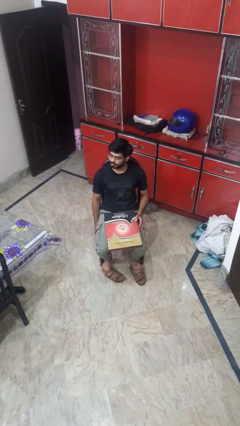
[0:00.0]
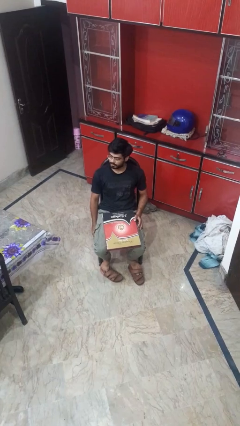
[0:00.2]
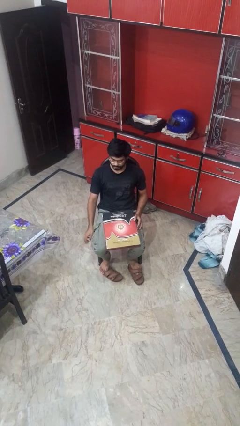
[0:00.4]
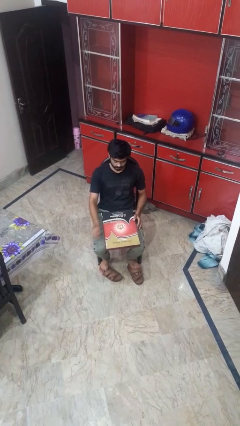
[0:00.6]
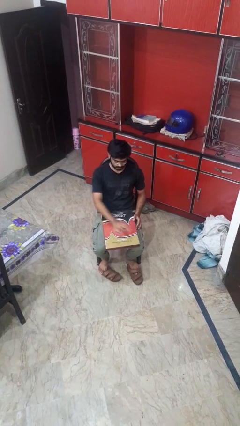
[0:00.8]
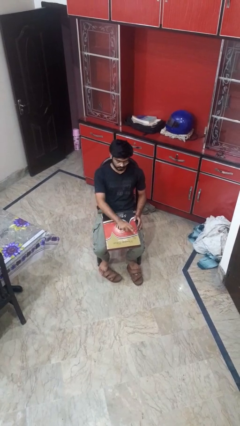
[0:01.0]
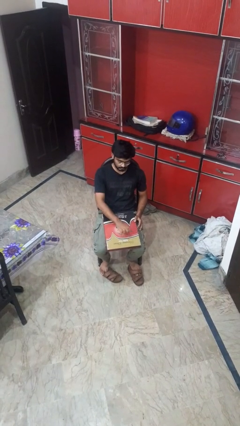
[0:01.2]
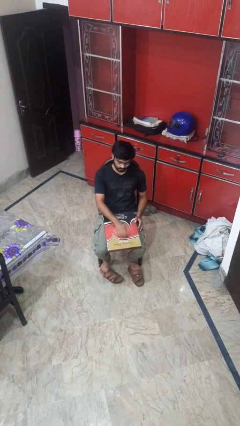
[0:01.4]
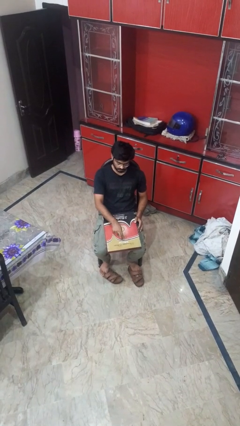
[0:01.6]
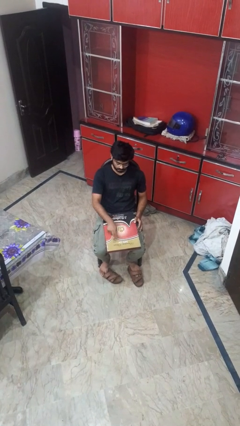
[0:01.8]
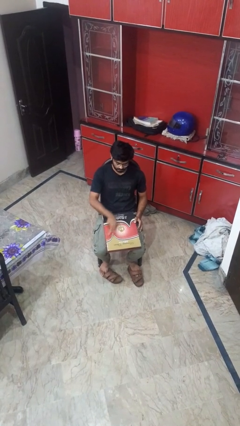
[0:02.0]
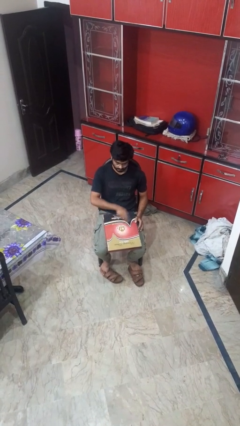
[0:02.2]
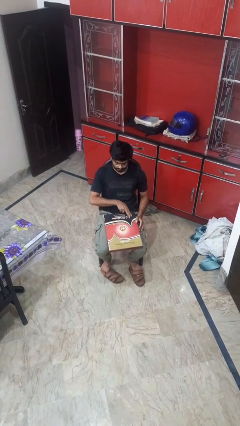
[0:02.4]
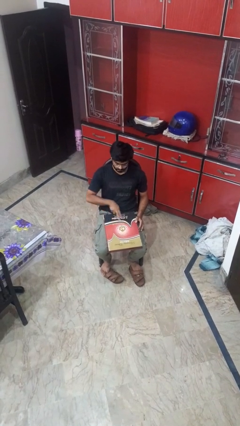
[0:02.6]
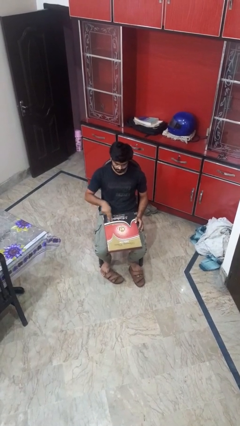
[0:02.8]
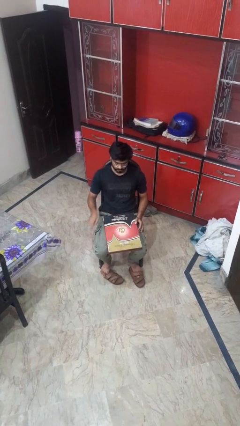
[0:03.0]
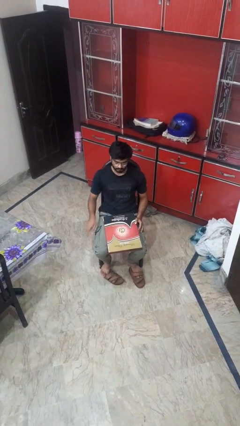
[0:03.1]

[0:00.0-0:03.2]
person taps object with finger

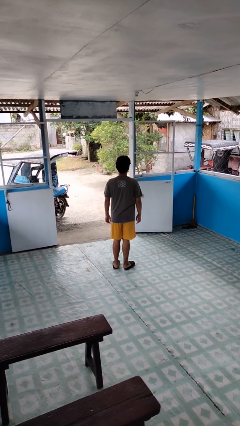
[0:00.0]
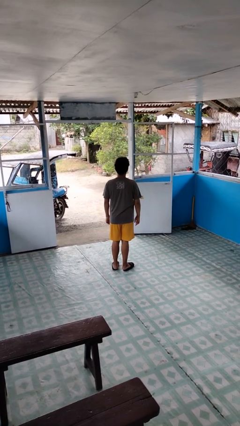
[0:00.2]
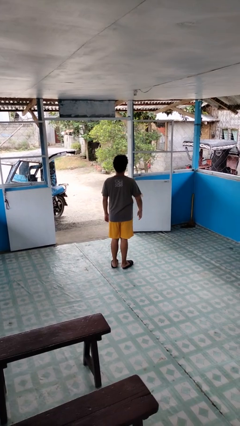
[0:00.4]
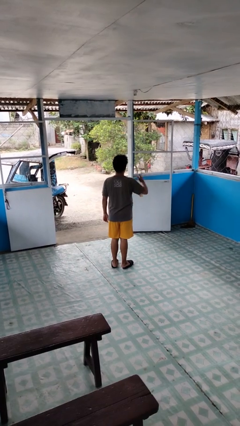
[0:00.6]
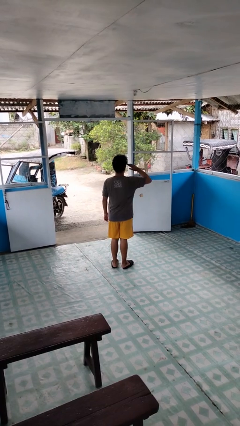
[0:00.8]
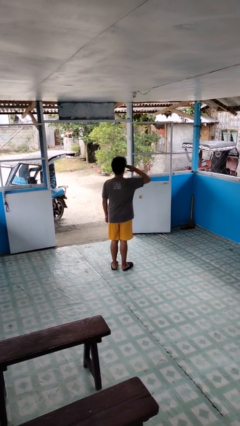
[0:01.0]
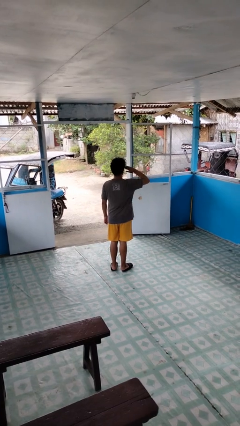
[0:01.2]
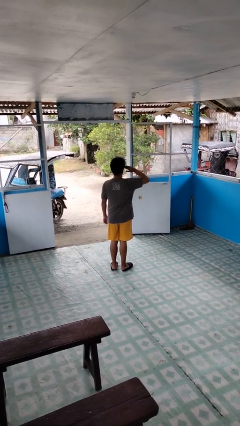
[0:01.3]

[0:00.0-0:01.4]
person salutes

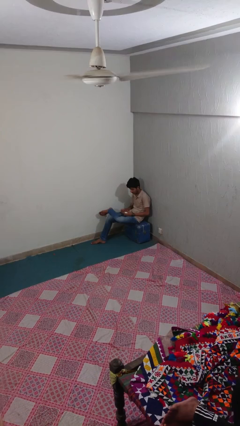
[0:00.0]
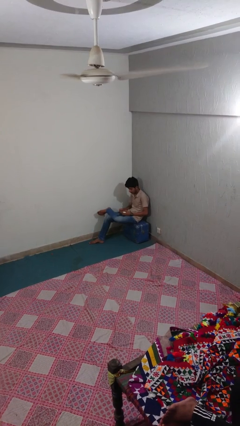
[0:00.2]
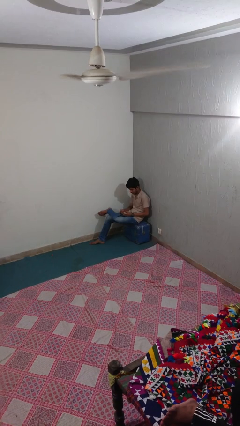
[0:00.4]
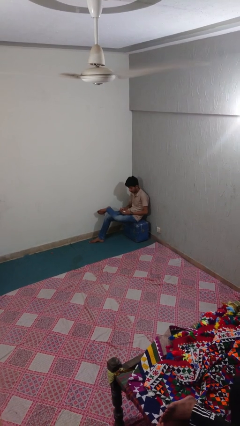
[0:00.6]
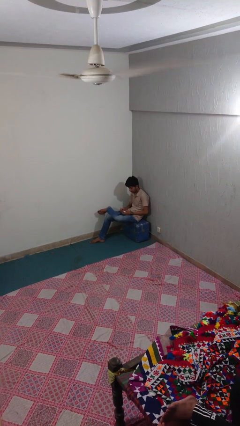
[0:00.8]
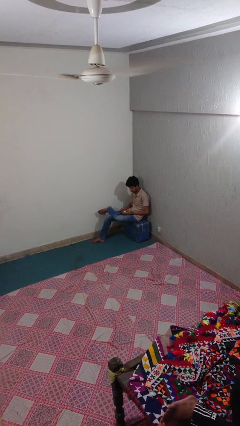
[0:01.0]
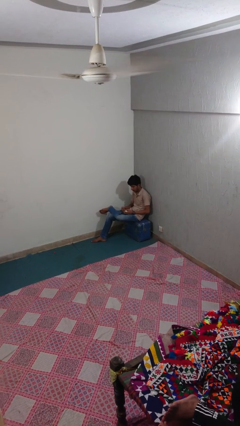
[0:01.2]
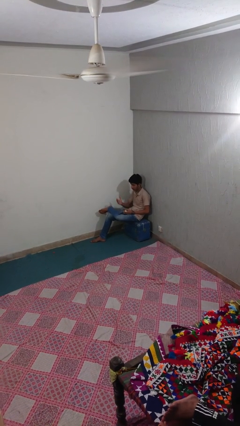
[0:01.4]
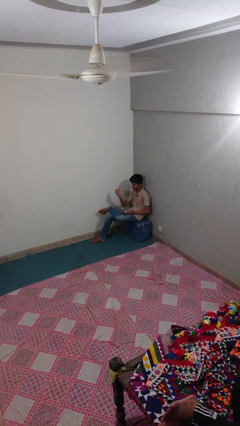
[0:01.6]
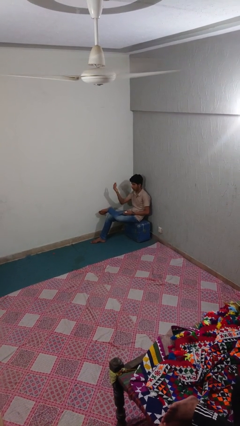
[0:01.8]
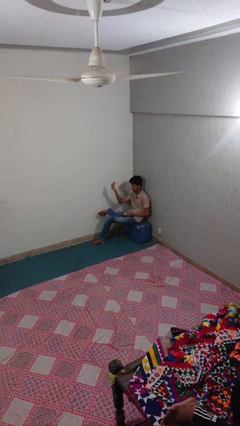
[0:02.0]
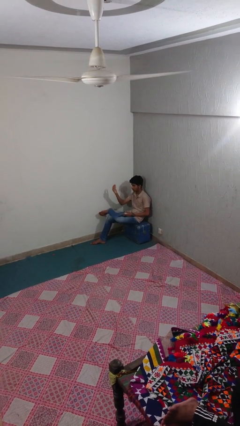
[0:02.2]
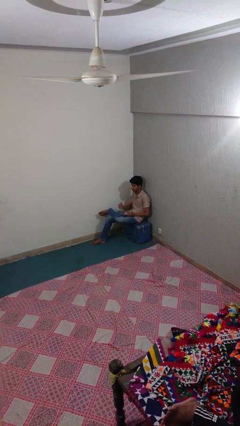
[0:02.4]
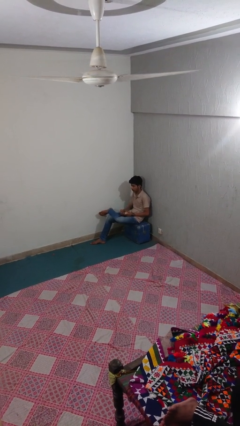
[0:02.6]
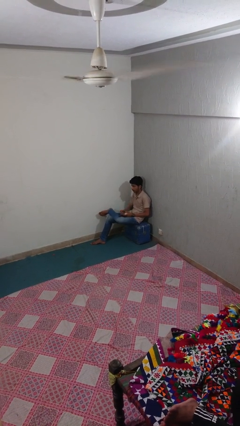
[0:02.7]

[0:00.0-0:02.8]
person gestures come here

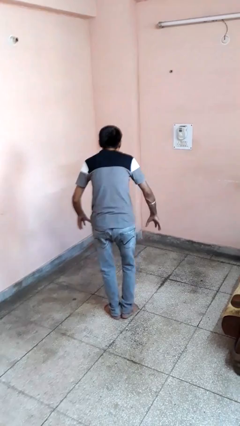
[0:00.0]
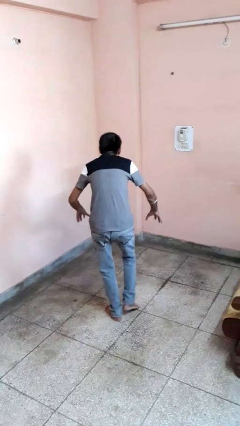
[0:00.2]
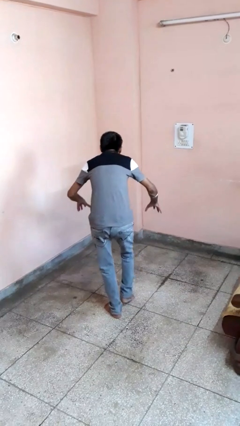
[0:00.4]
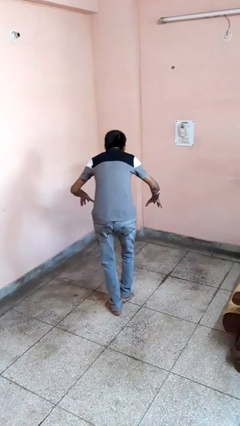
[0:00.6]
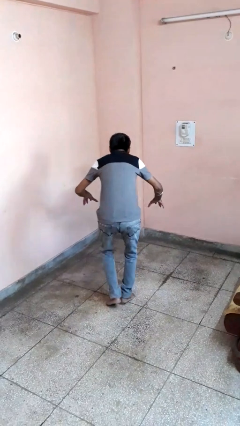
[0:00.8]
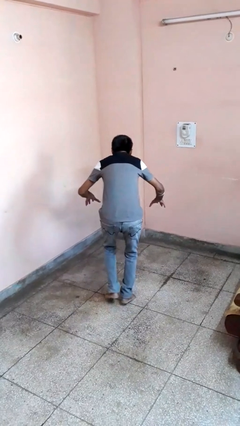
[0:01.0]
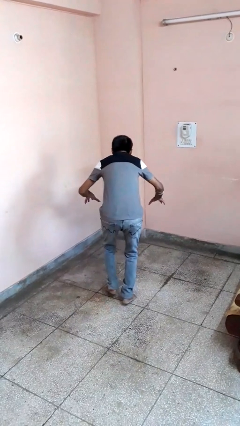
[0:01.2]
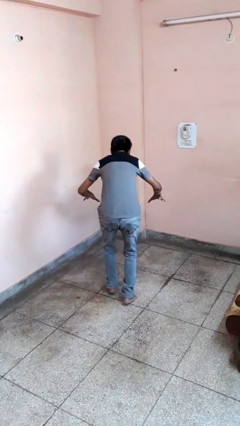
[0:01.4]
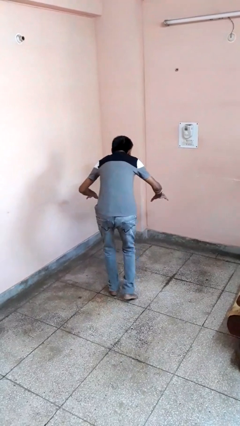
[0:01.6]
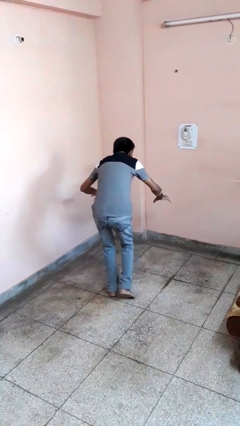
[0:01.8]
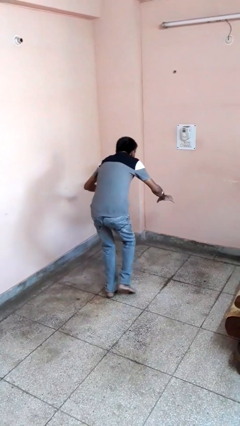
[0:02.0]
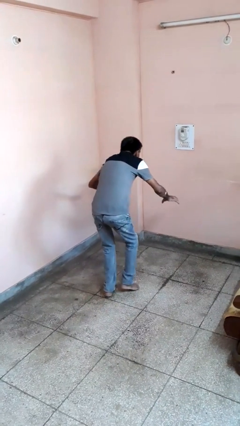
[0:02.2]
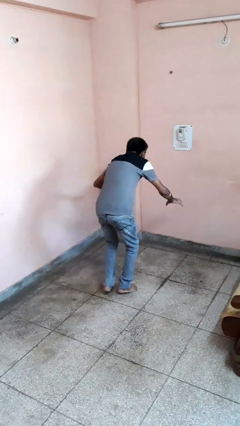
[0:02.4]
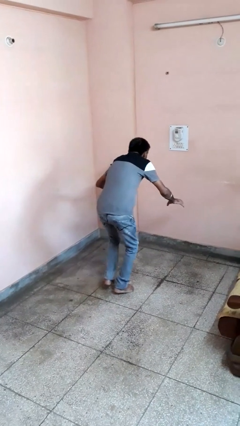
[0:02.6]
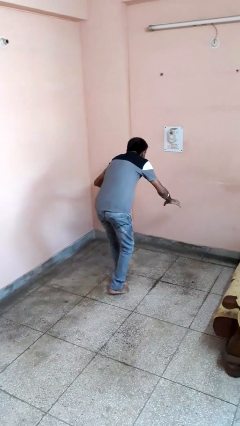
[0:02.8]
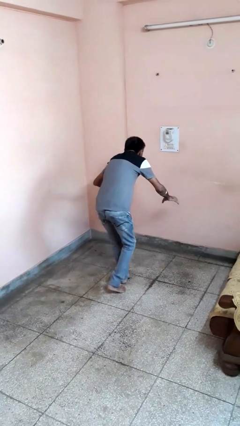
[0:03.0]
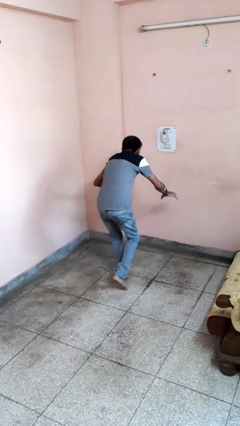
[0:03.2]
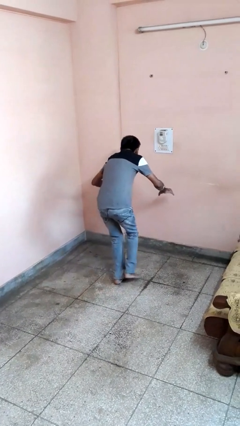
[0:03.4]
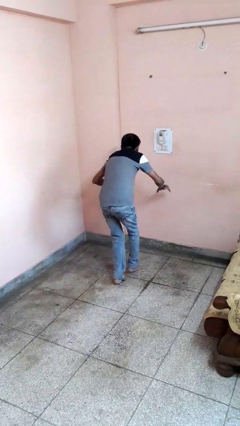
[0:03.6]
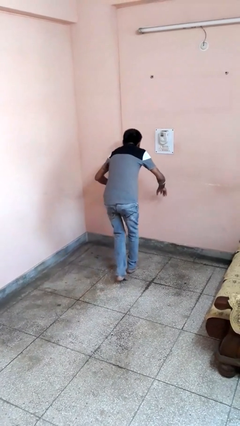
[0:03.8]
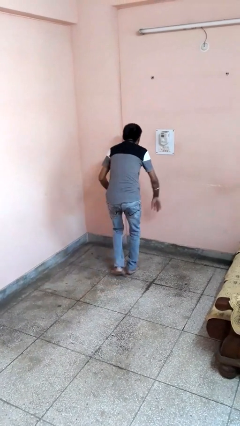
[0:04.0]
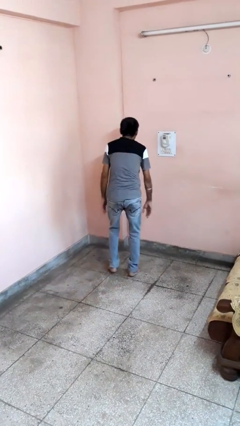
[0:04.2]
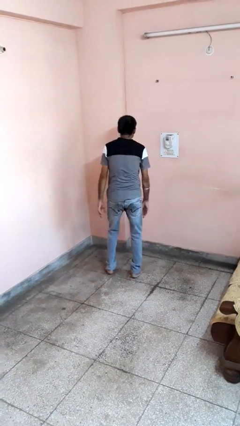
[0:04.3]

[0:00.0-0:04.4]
person walks tiptoe

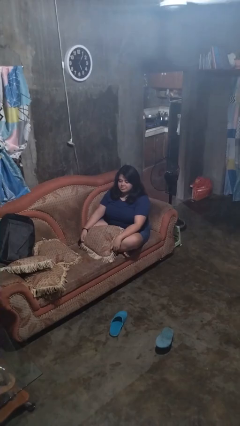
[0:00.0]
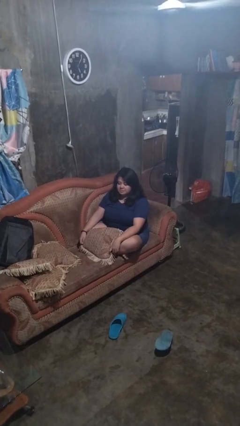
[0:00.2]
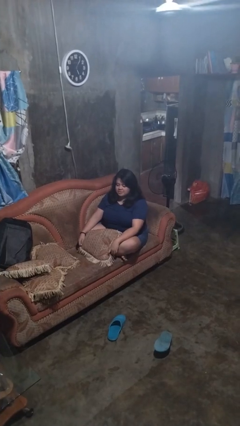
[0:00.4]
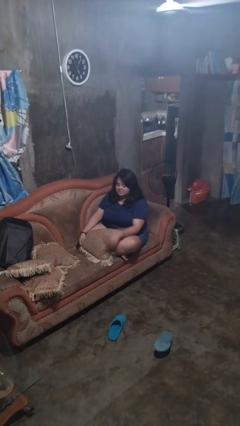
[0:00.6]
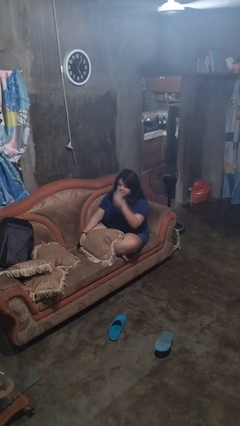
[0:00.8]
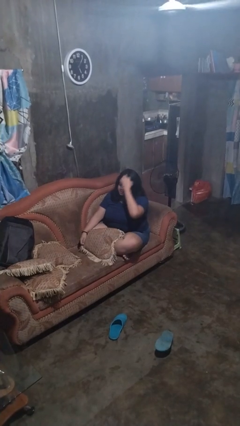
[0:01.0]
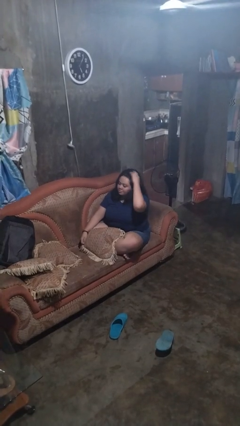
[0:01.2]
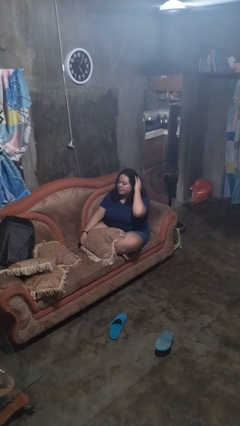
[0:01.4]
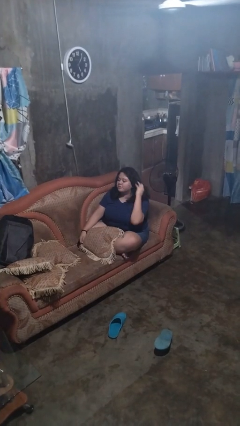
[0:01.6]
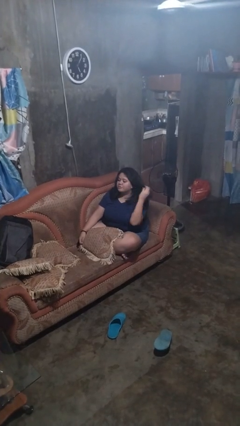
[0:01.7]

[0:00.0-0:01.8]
person strokes hair

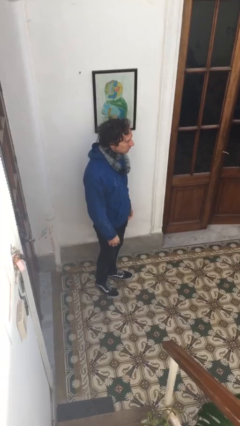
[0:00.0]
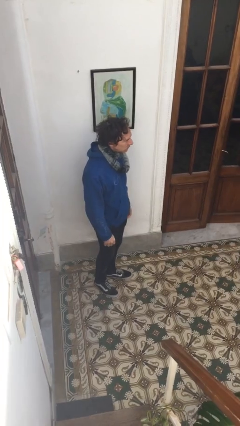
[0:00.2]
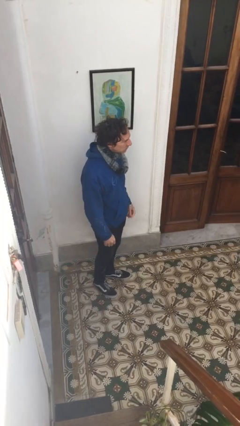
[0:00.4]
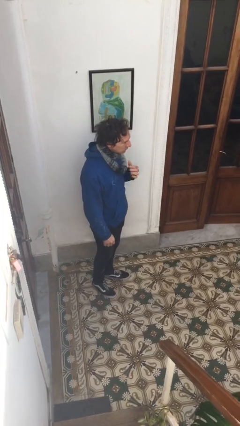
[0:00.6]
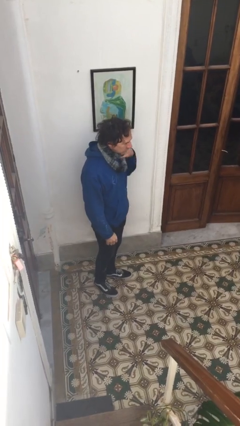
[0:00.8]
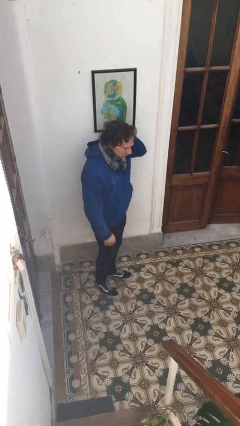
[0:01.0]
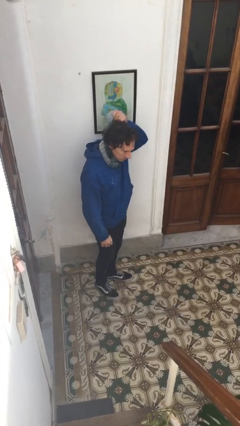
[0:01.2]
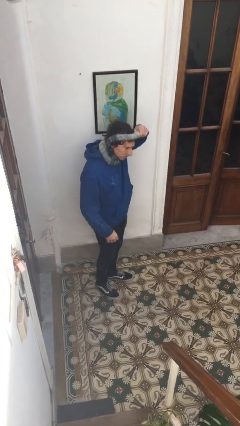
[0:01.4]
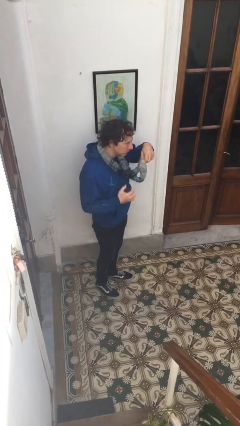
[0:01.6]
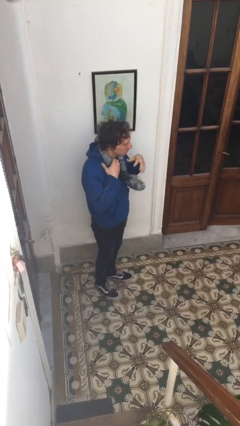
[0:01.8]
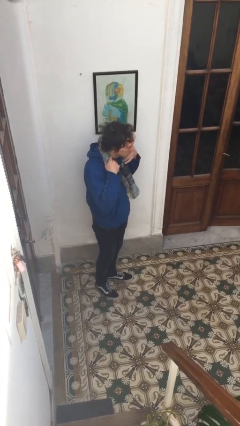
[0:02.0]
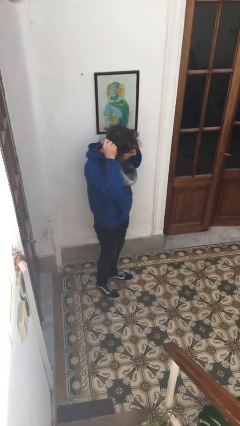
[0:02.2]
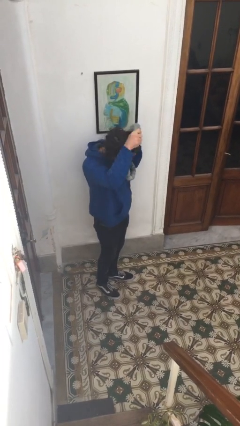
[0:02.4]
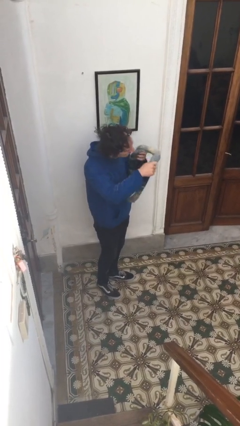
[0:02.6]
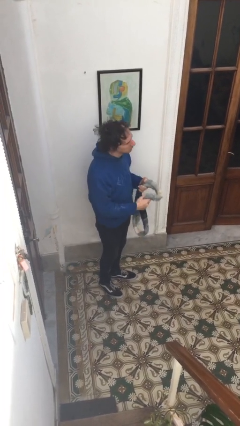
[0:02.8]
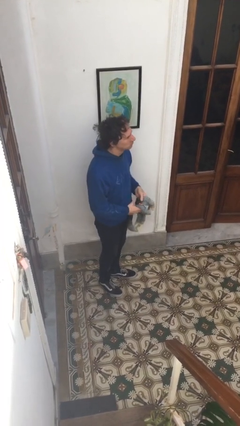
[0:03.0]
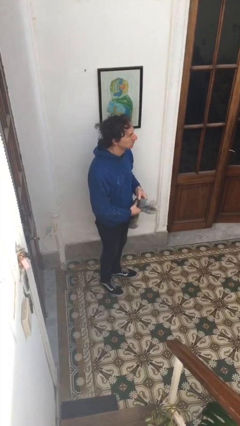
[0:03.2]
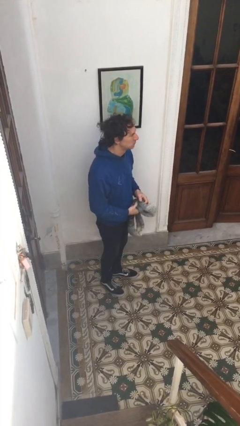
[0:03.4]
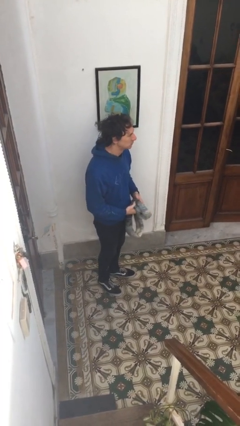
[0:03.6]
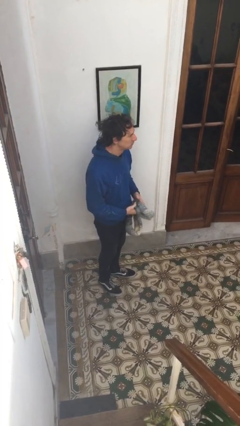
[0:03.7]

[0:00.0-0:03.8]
person takes off scarf

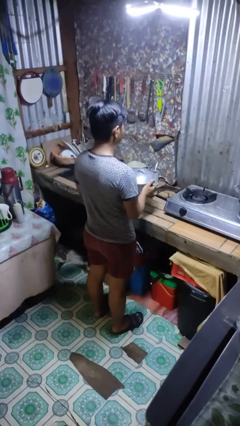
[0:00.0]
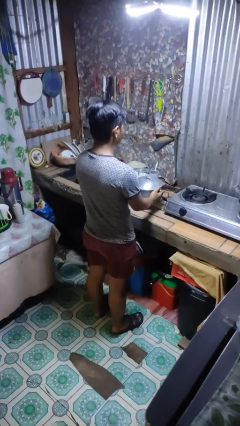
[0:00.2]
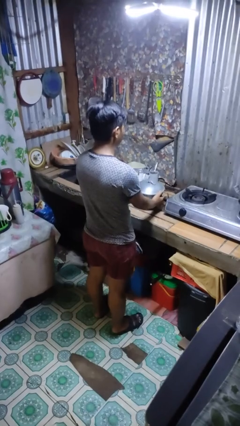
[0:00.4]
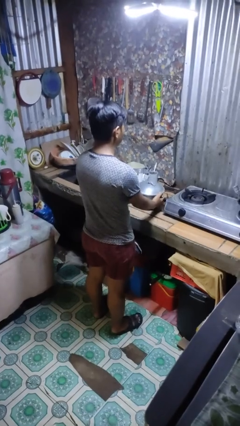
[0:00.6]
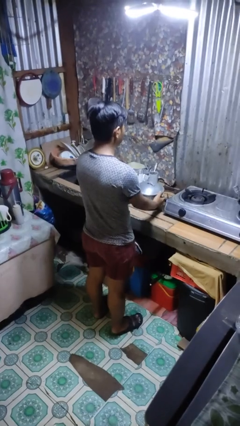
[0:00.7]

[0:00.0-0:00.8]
person puts down object on countertop
